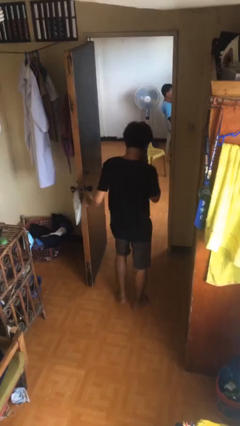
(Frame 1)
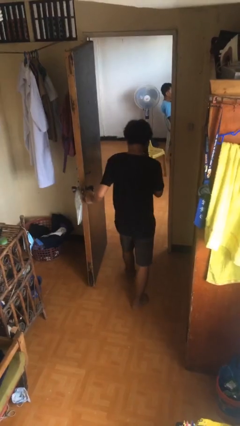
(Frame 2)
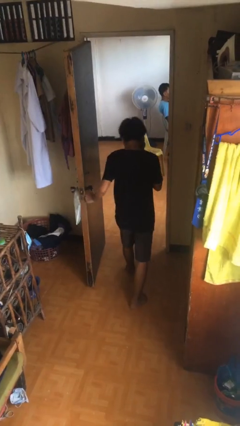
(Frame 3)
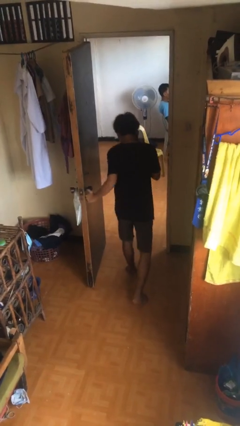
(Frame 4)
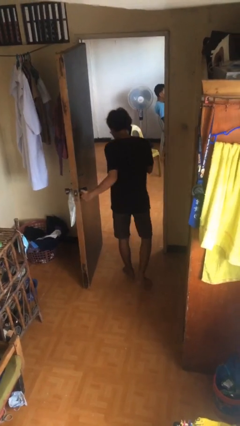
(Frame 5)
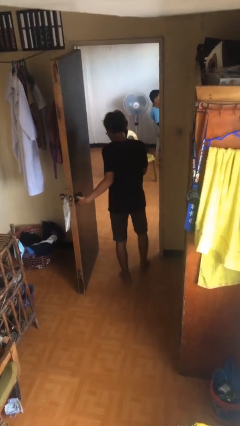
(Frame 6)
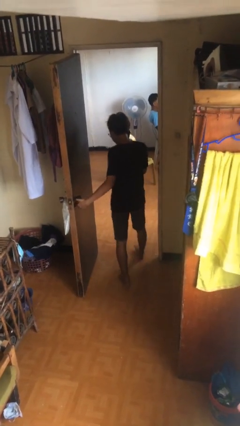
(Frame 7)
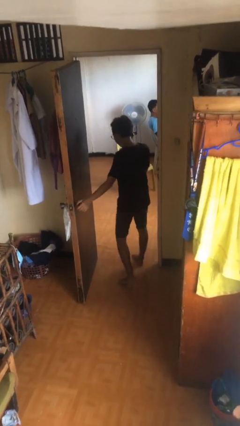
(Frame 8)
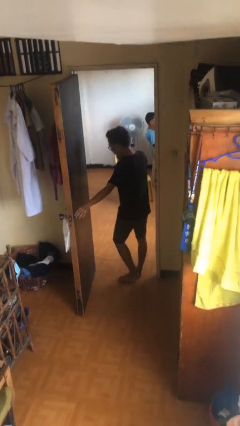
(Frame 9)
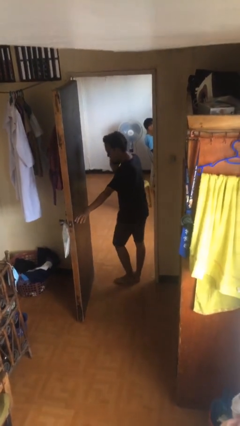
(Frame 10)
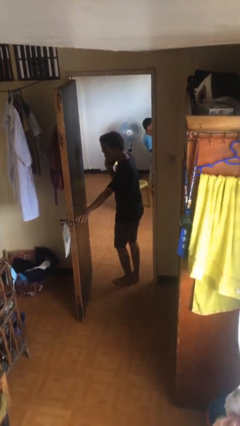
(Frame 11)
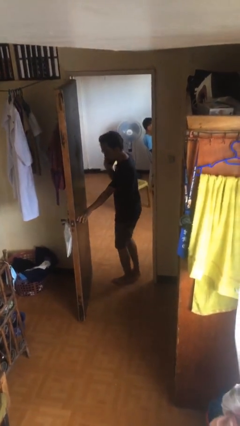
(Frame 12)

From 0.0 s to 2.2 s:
person exits scene through structure

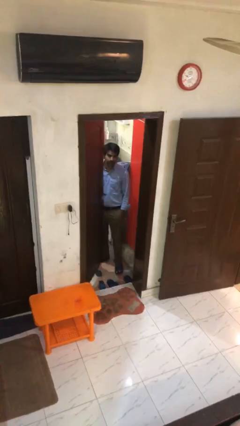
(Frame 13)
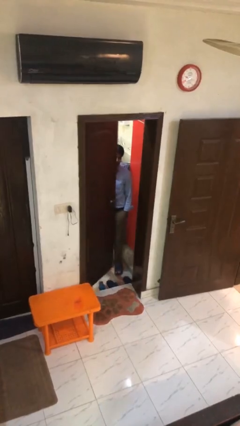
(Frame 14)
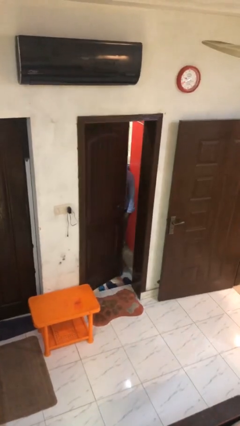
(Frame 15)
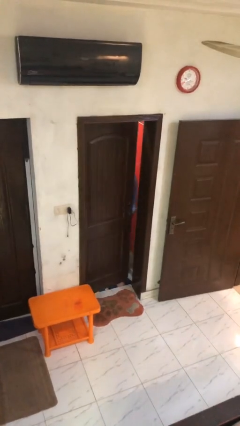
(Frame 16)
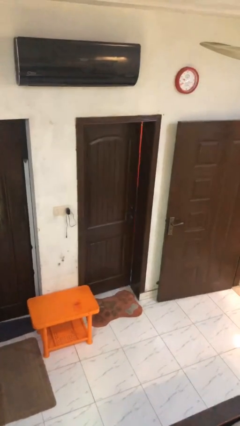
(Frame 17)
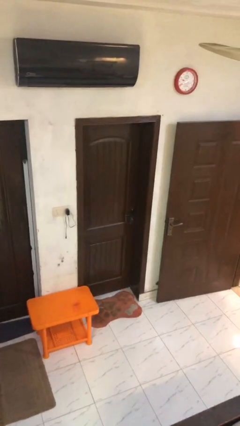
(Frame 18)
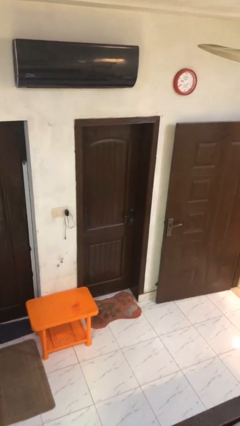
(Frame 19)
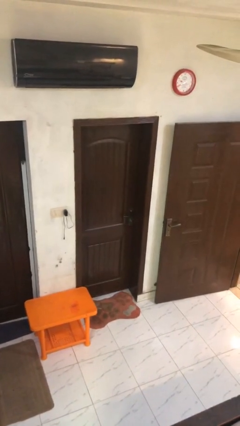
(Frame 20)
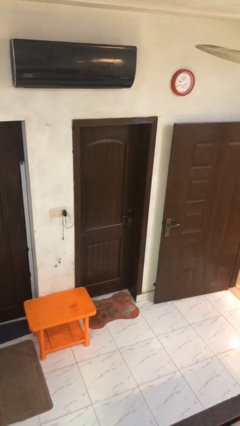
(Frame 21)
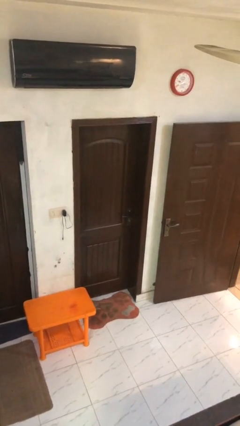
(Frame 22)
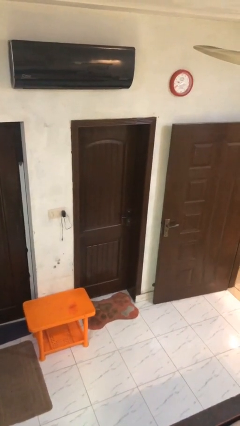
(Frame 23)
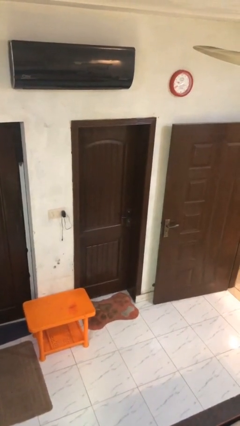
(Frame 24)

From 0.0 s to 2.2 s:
person closes facility door

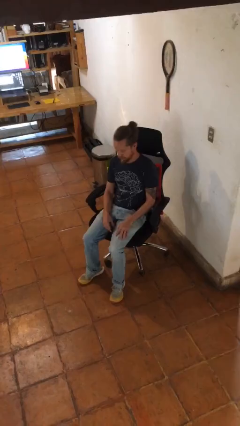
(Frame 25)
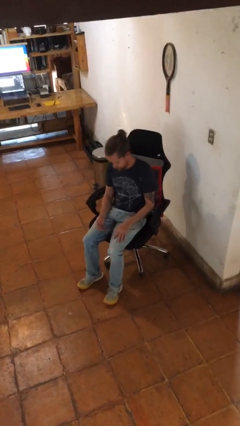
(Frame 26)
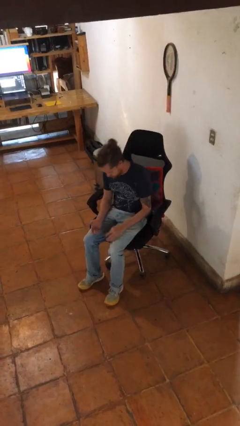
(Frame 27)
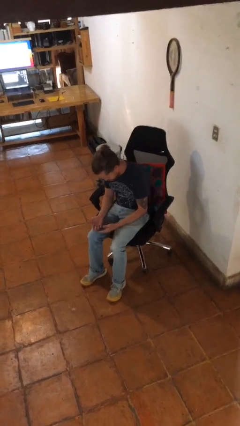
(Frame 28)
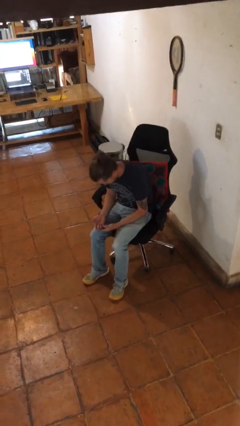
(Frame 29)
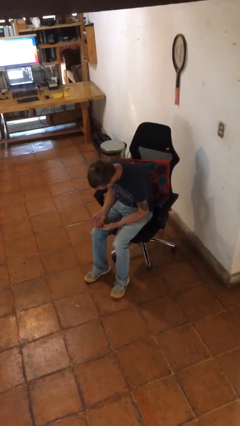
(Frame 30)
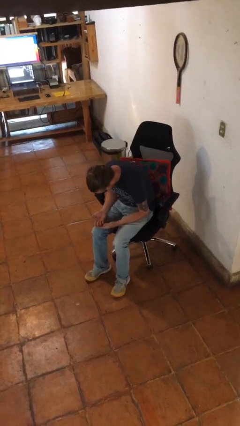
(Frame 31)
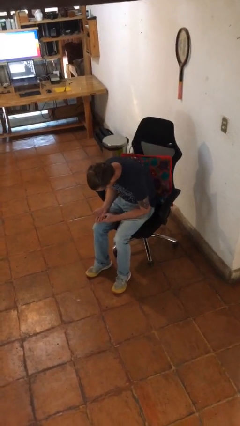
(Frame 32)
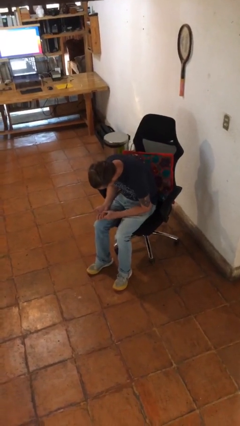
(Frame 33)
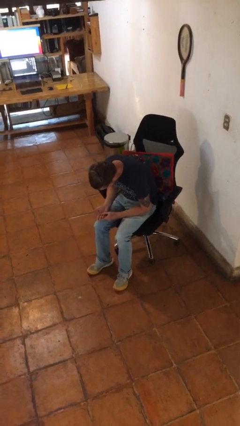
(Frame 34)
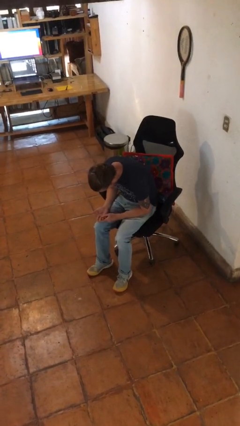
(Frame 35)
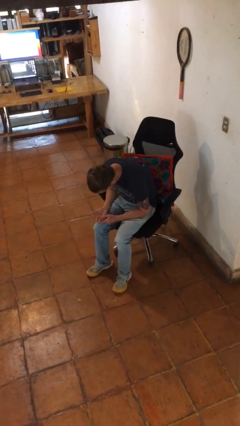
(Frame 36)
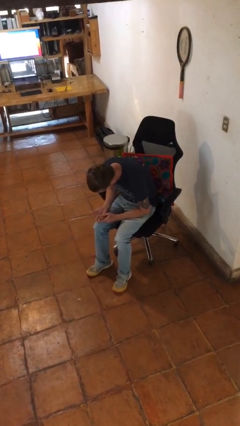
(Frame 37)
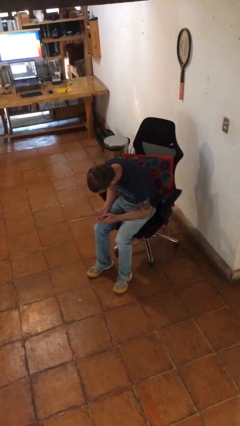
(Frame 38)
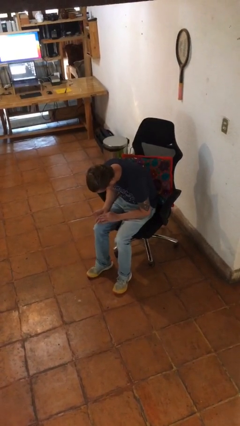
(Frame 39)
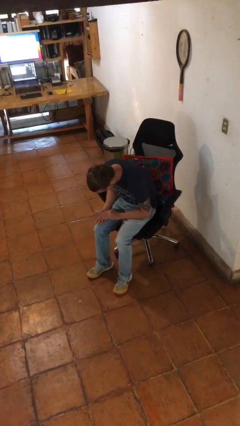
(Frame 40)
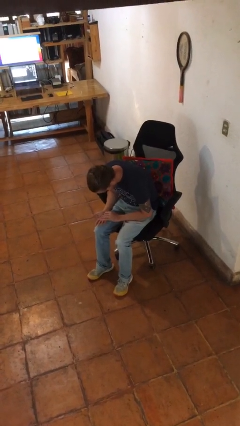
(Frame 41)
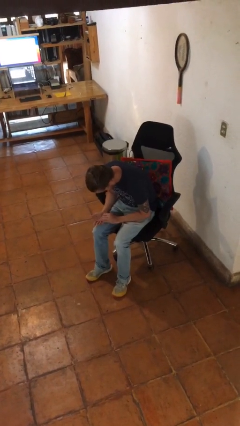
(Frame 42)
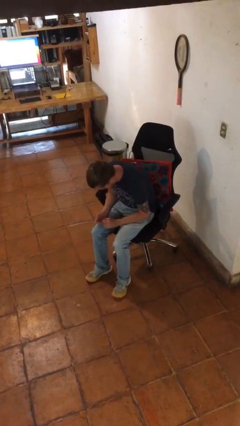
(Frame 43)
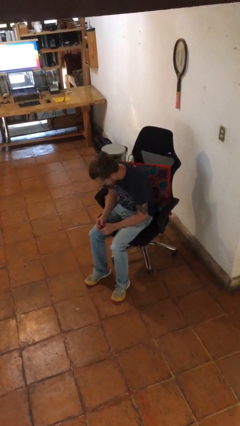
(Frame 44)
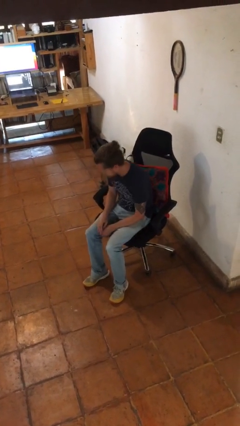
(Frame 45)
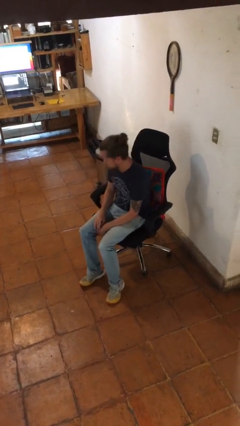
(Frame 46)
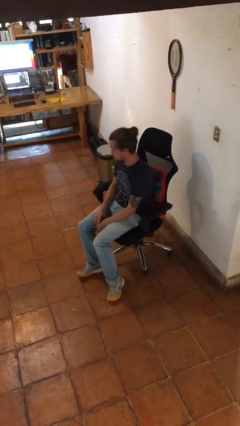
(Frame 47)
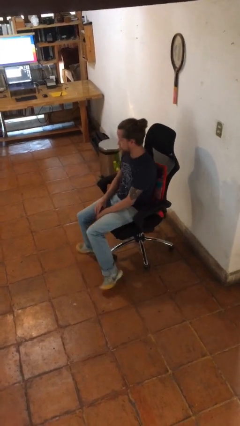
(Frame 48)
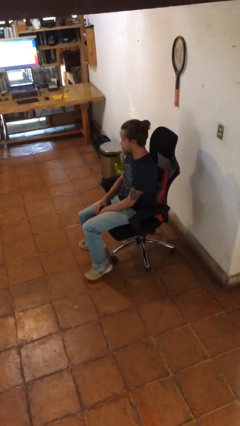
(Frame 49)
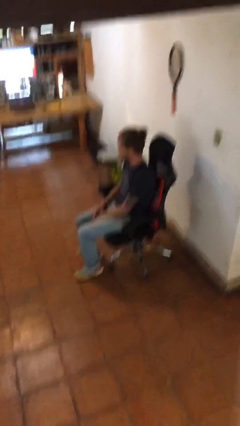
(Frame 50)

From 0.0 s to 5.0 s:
person looks at hands in lap

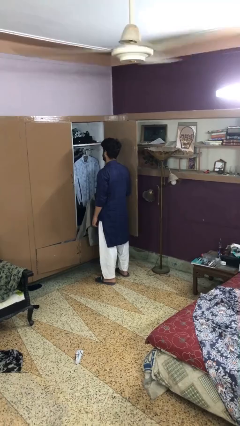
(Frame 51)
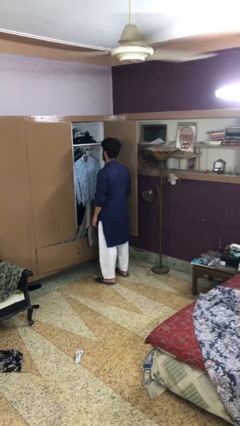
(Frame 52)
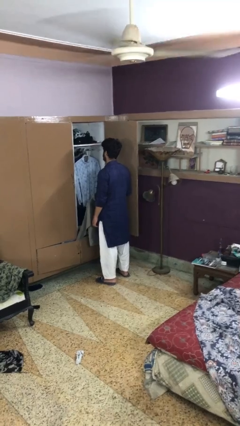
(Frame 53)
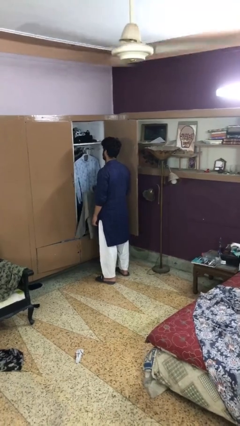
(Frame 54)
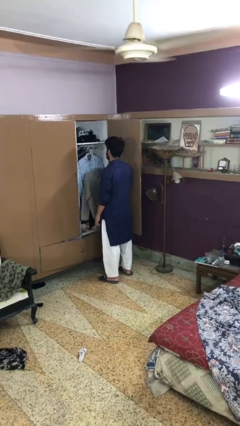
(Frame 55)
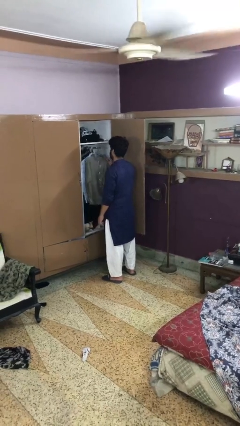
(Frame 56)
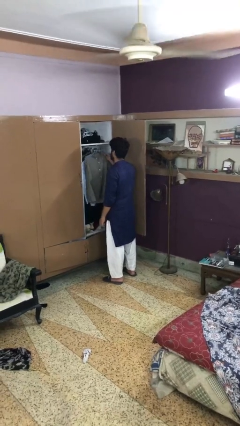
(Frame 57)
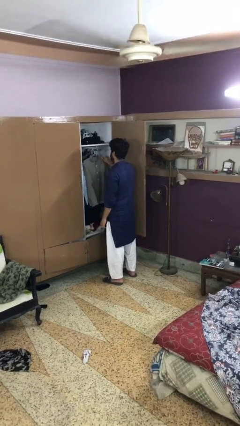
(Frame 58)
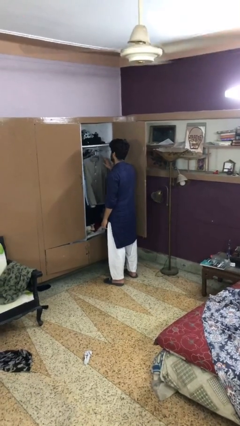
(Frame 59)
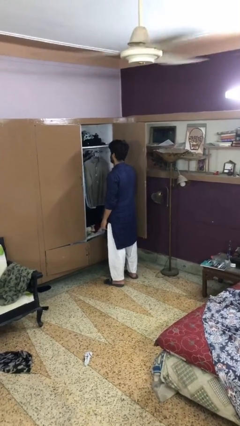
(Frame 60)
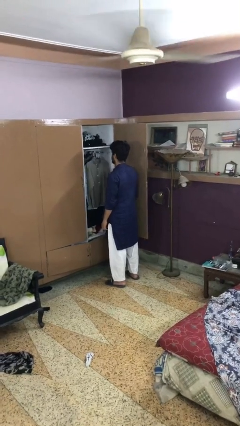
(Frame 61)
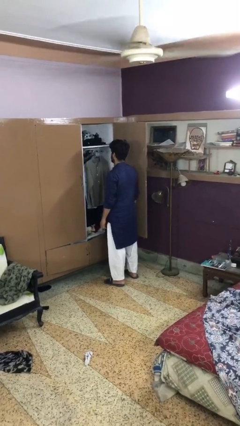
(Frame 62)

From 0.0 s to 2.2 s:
person puts clothes into closet

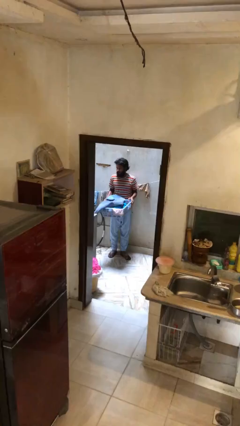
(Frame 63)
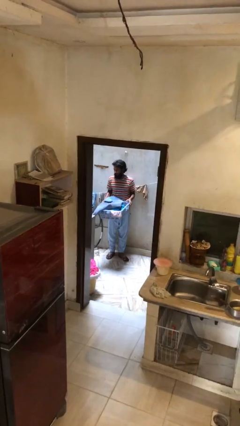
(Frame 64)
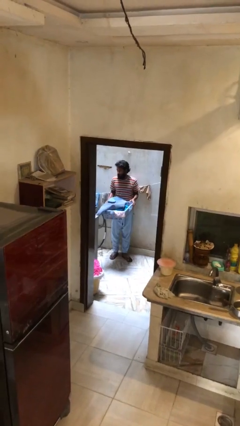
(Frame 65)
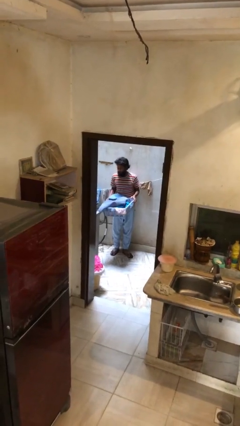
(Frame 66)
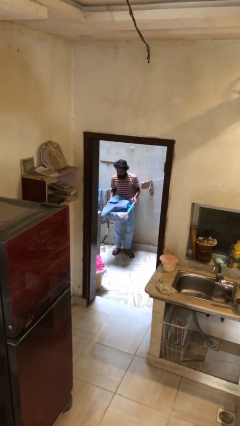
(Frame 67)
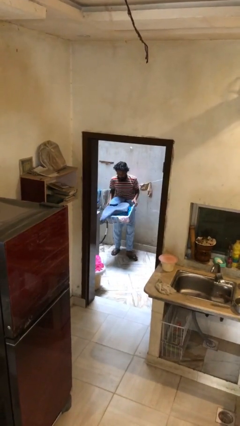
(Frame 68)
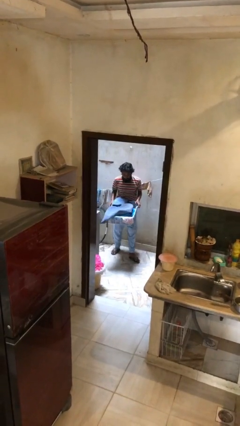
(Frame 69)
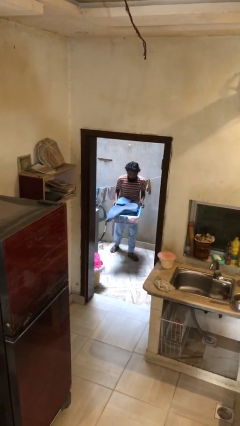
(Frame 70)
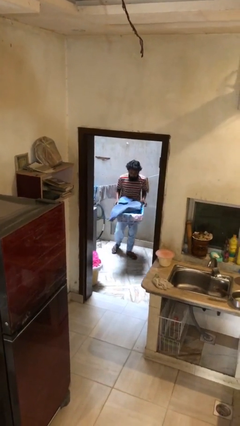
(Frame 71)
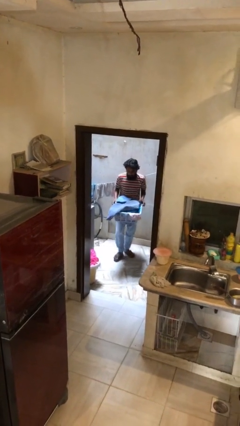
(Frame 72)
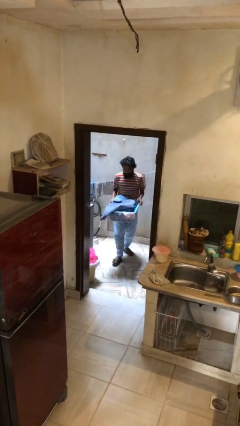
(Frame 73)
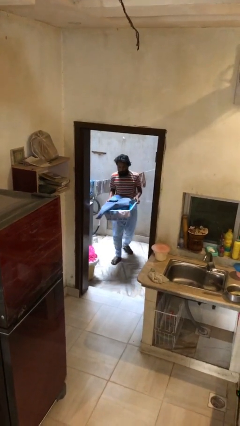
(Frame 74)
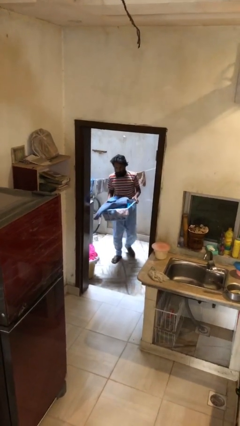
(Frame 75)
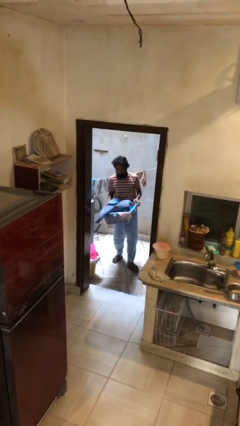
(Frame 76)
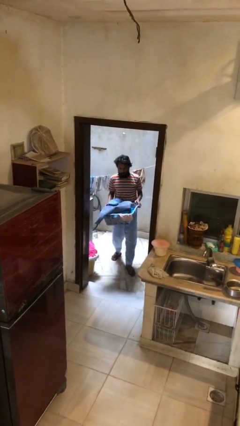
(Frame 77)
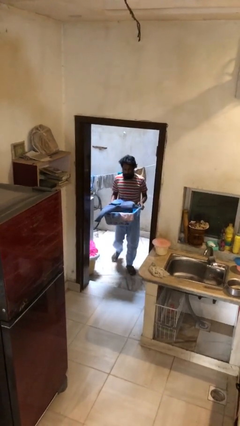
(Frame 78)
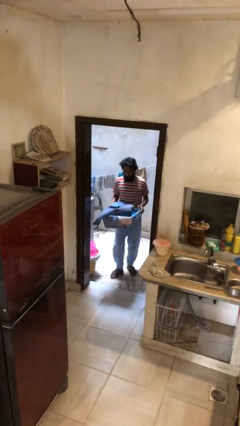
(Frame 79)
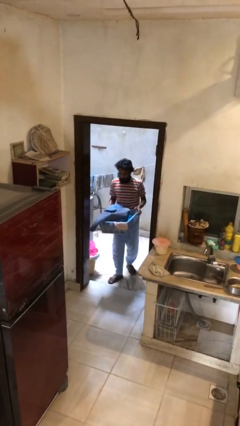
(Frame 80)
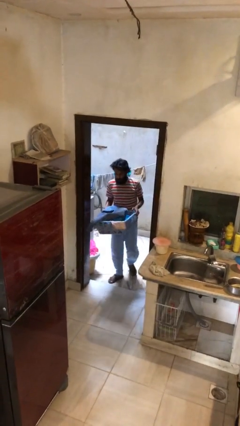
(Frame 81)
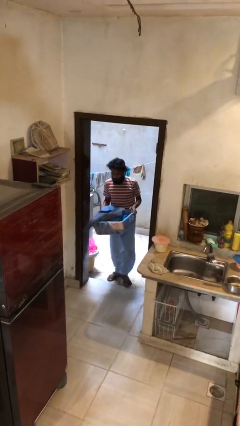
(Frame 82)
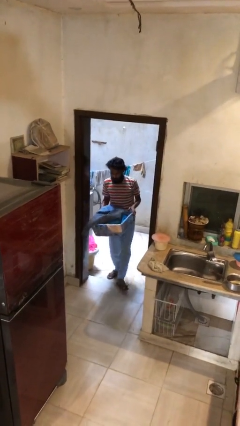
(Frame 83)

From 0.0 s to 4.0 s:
person carries heavy object

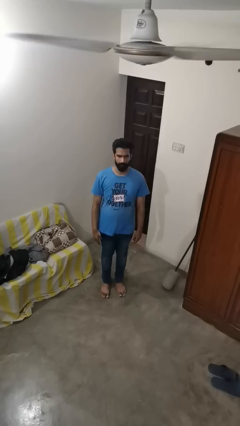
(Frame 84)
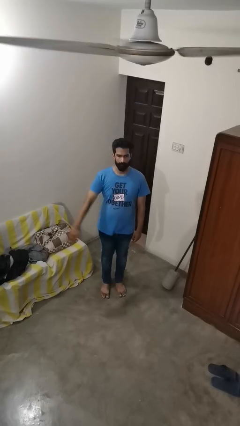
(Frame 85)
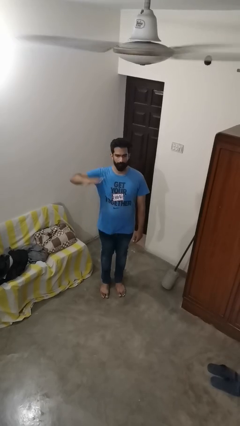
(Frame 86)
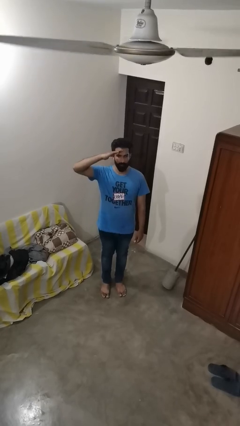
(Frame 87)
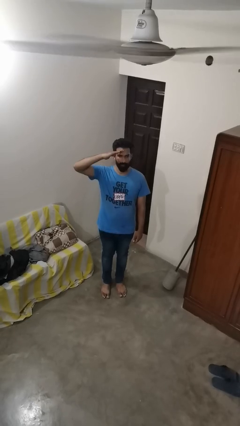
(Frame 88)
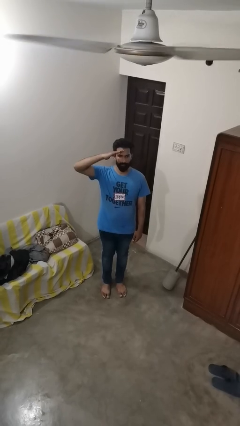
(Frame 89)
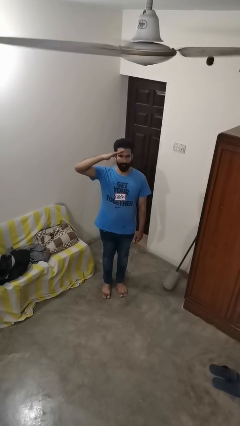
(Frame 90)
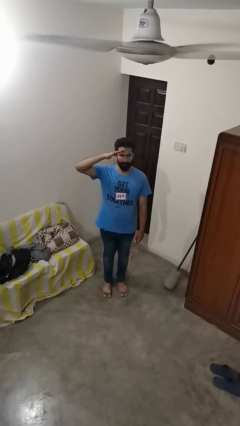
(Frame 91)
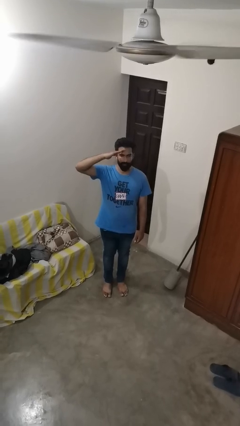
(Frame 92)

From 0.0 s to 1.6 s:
person salutes

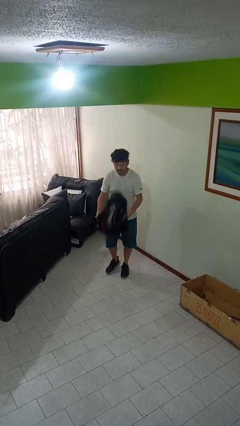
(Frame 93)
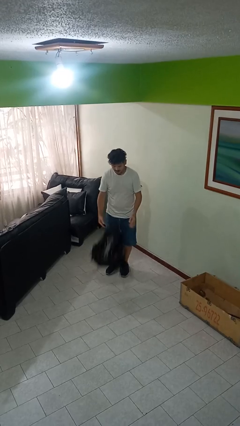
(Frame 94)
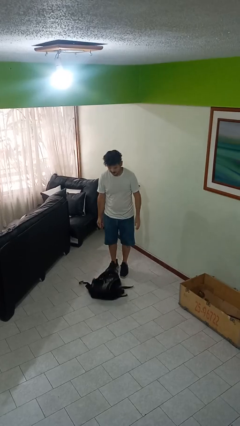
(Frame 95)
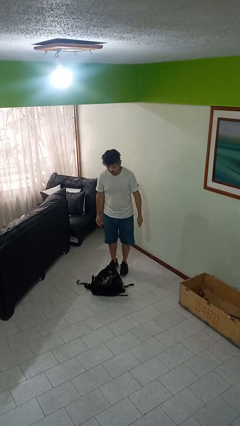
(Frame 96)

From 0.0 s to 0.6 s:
person drops object
